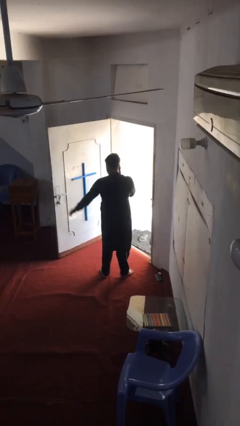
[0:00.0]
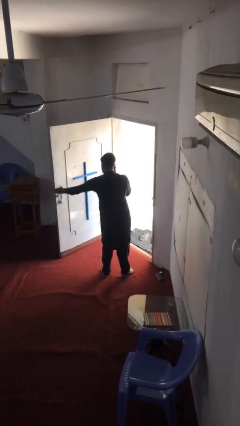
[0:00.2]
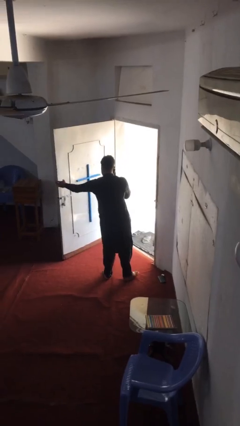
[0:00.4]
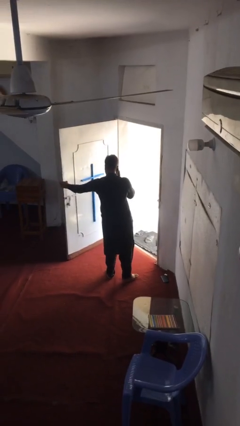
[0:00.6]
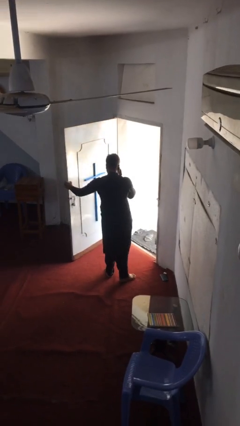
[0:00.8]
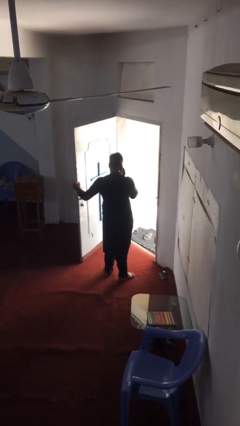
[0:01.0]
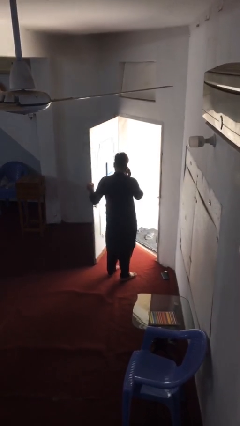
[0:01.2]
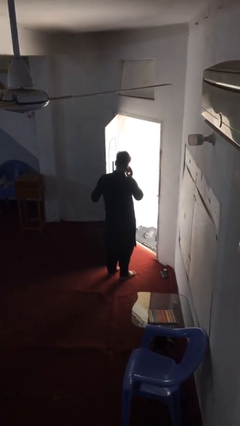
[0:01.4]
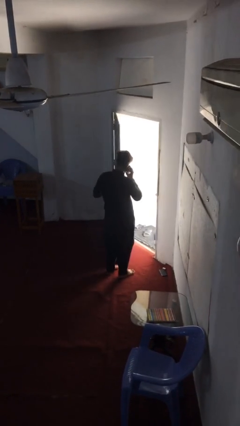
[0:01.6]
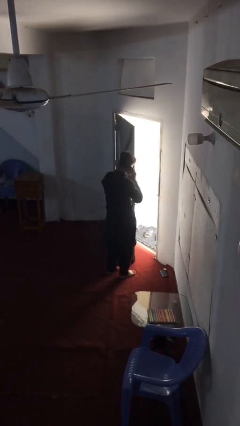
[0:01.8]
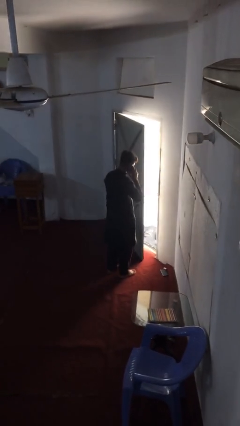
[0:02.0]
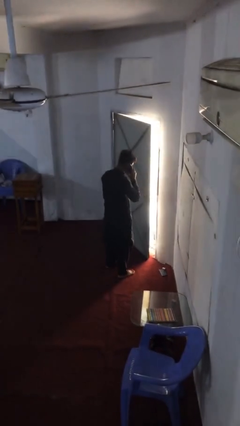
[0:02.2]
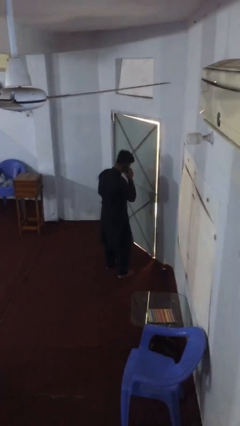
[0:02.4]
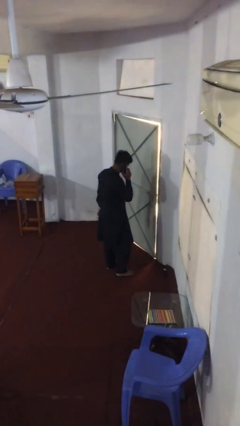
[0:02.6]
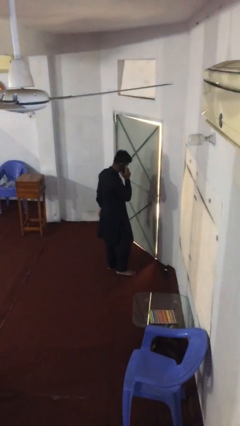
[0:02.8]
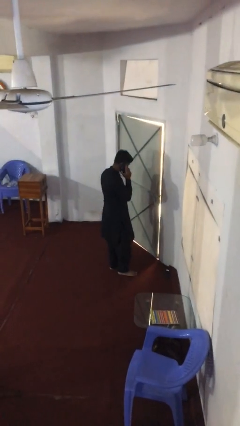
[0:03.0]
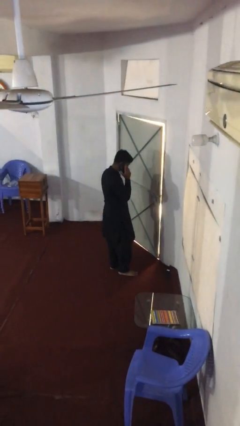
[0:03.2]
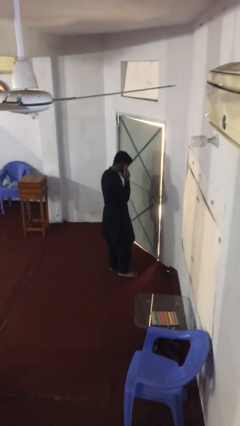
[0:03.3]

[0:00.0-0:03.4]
person closes facility door

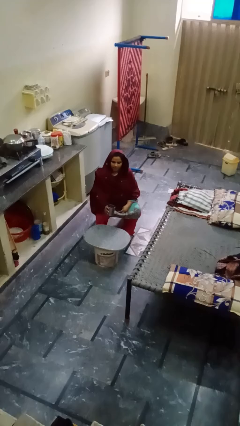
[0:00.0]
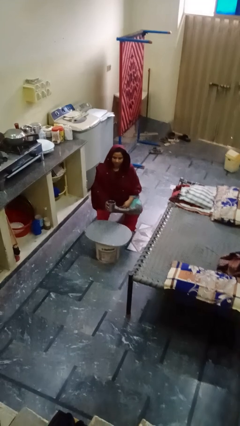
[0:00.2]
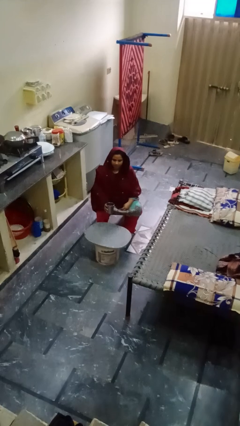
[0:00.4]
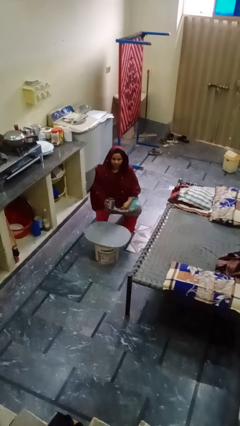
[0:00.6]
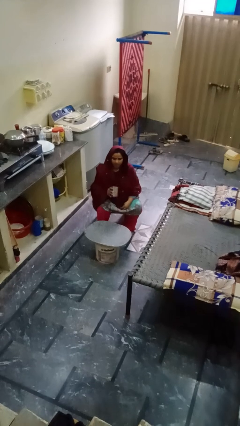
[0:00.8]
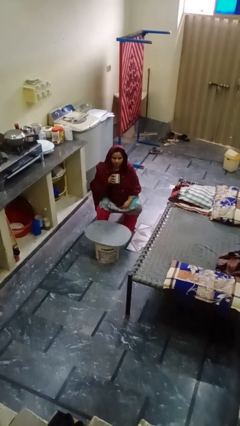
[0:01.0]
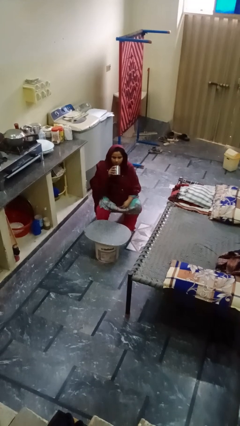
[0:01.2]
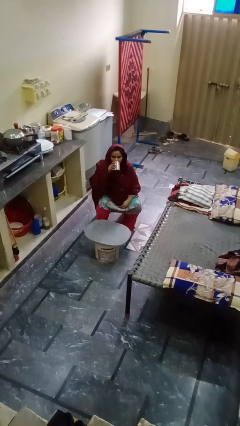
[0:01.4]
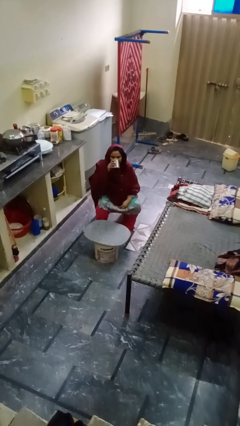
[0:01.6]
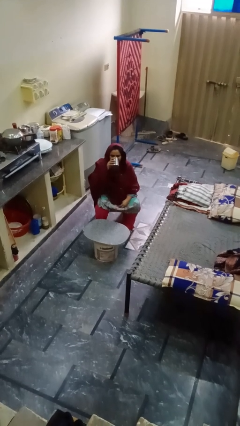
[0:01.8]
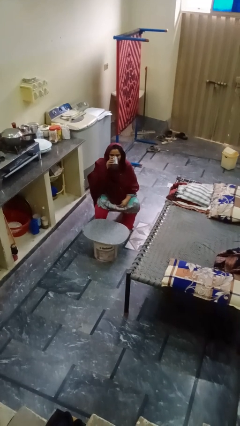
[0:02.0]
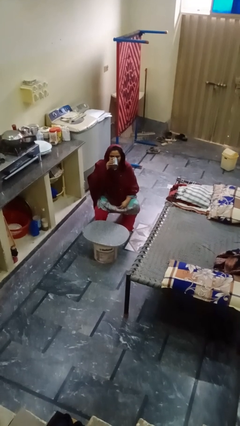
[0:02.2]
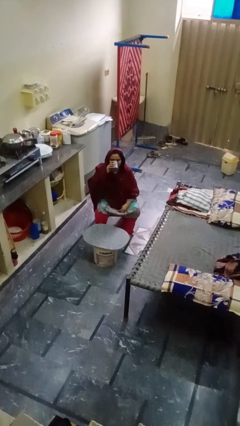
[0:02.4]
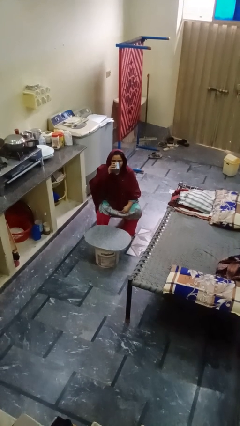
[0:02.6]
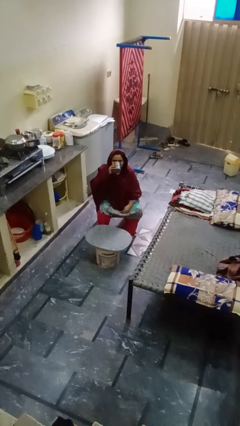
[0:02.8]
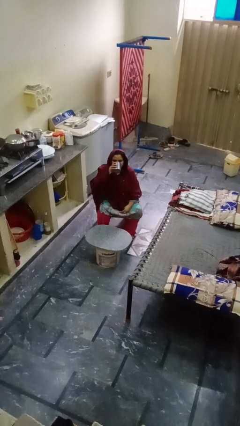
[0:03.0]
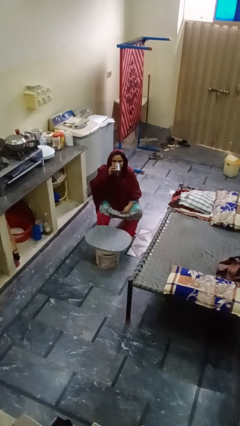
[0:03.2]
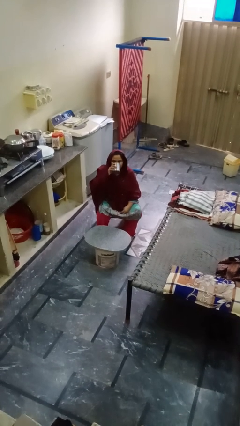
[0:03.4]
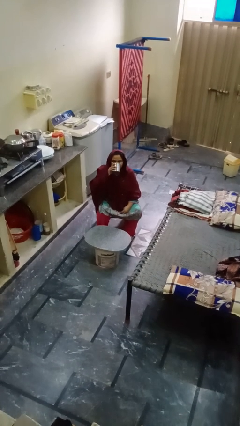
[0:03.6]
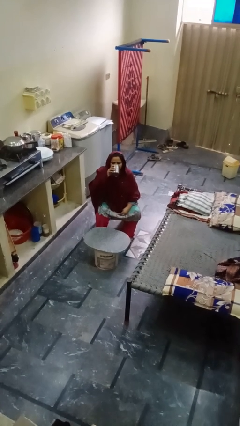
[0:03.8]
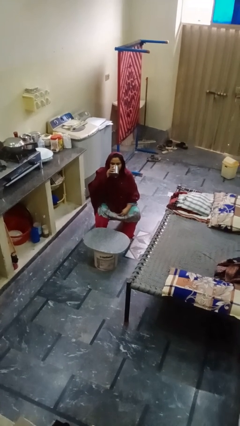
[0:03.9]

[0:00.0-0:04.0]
person drinks from shotglass

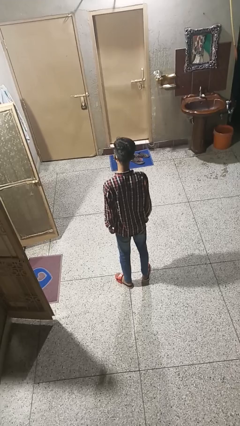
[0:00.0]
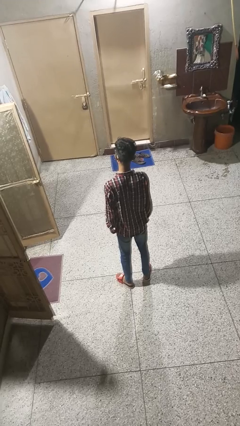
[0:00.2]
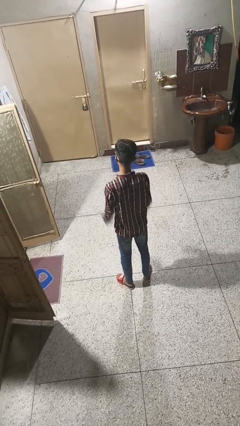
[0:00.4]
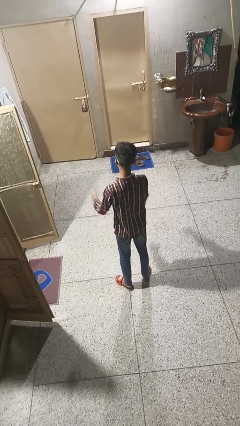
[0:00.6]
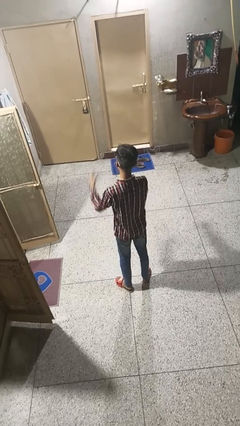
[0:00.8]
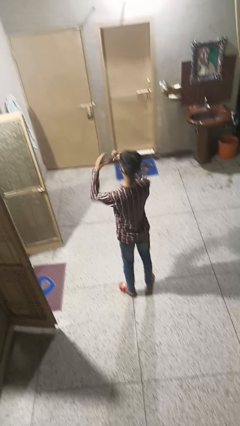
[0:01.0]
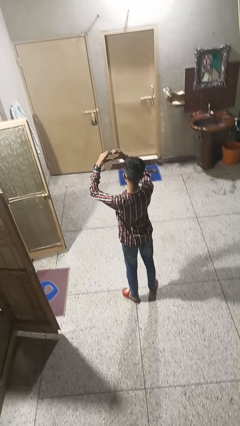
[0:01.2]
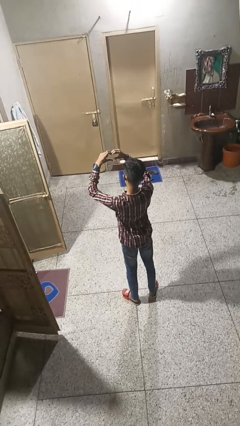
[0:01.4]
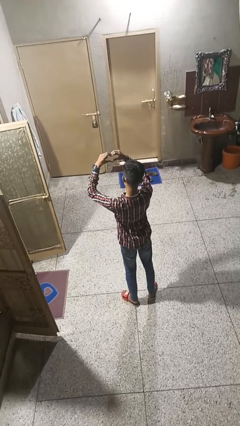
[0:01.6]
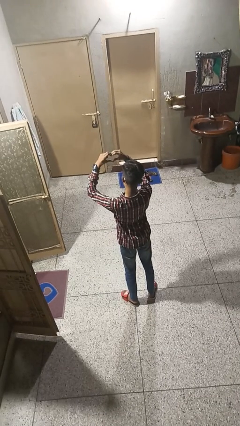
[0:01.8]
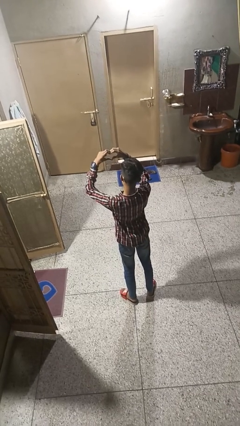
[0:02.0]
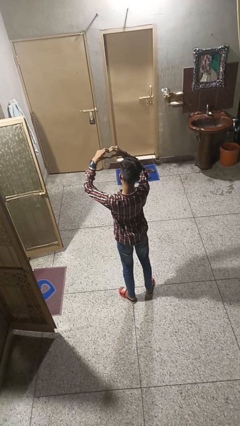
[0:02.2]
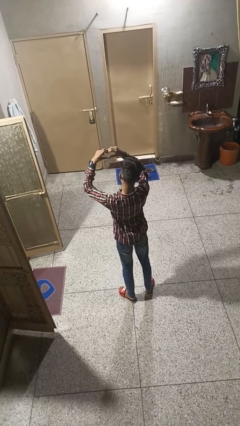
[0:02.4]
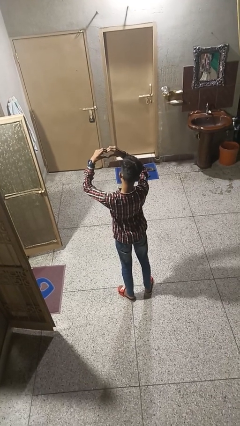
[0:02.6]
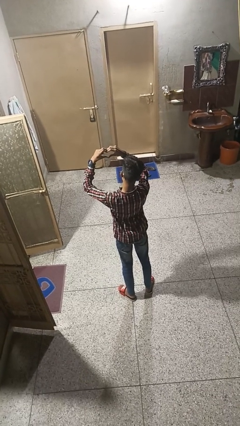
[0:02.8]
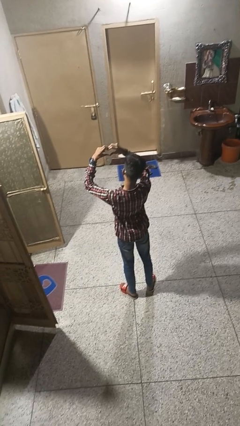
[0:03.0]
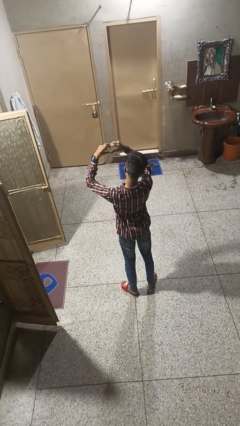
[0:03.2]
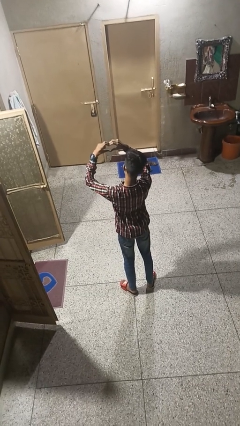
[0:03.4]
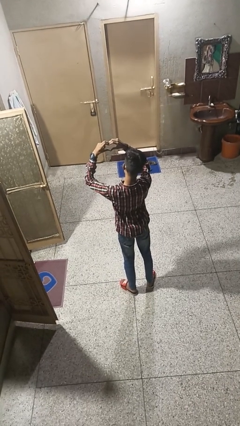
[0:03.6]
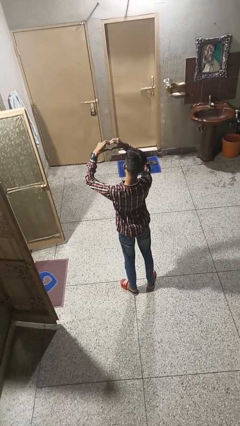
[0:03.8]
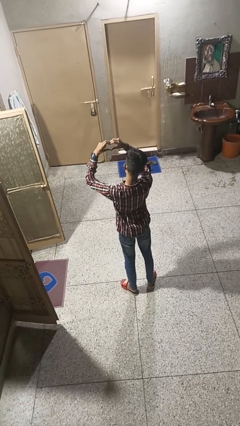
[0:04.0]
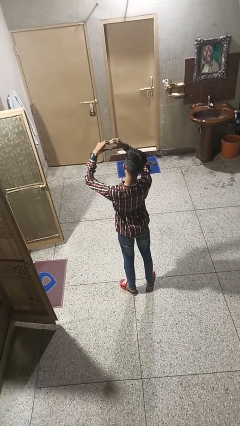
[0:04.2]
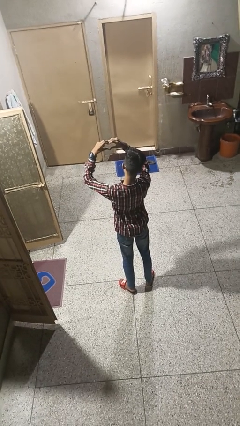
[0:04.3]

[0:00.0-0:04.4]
person gestures heart

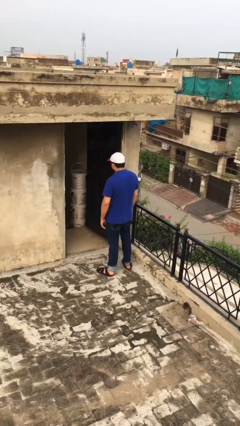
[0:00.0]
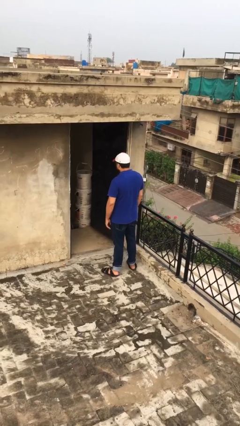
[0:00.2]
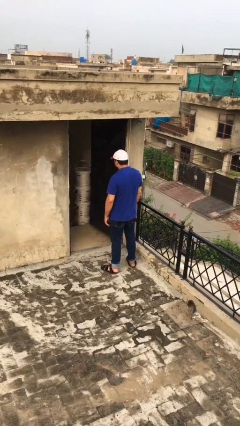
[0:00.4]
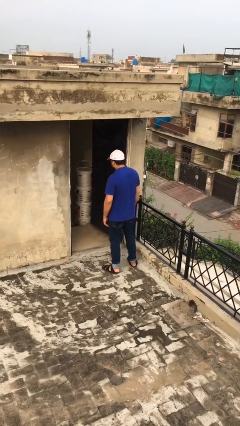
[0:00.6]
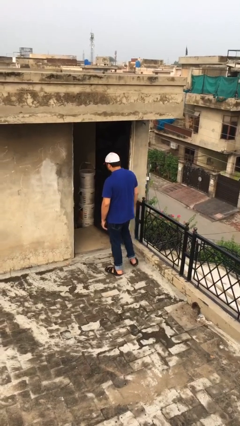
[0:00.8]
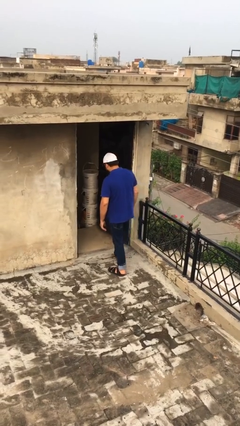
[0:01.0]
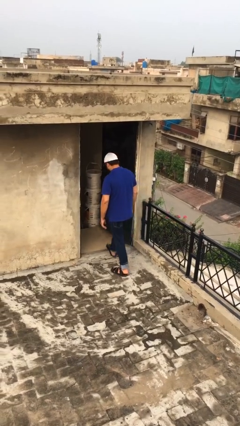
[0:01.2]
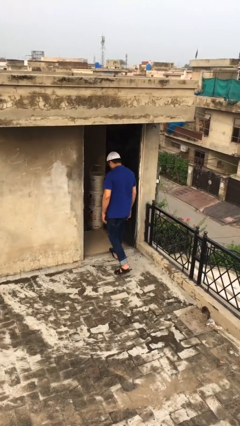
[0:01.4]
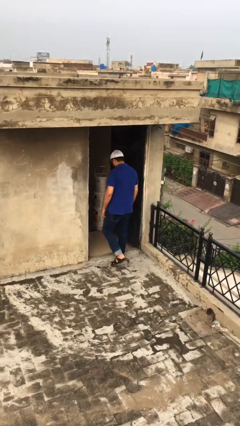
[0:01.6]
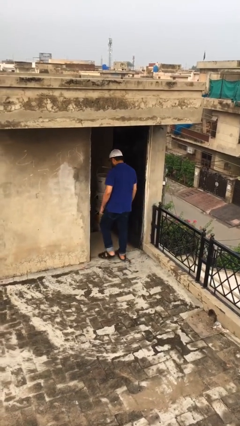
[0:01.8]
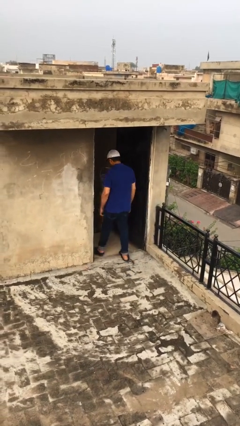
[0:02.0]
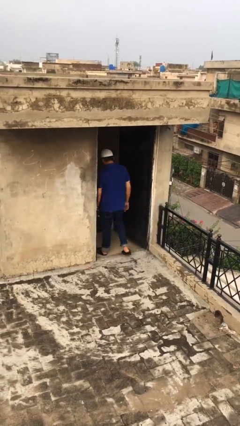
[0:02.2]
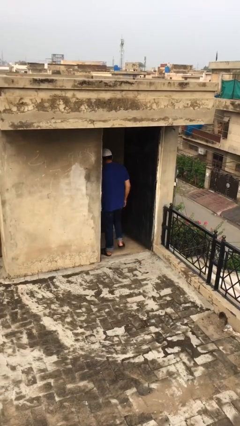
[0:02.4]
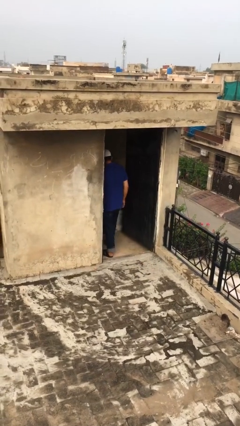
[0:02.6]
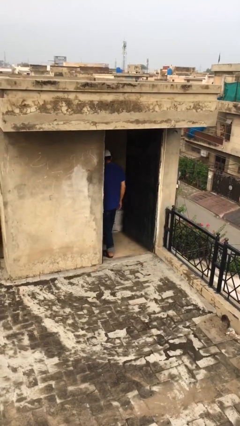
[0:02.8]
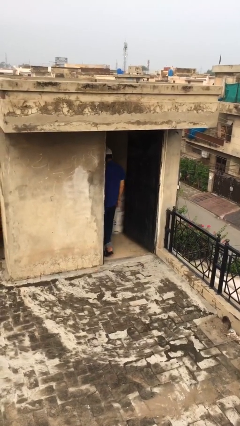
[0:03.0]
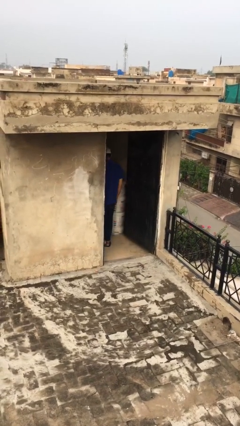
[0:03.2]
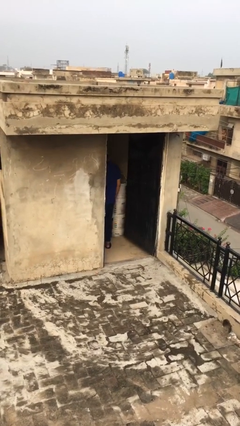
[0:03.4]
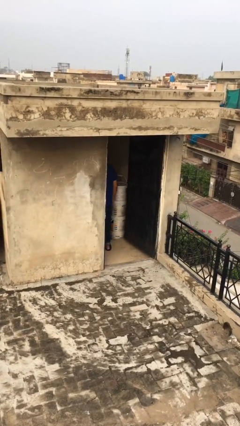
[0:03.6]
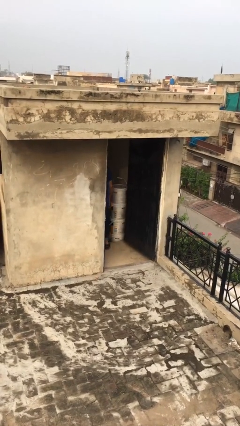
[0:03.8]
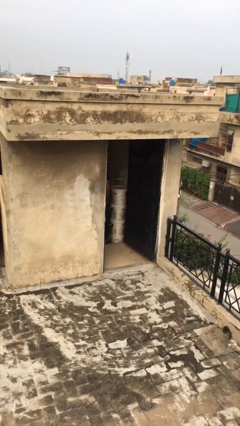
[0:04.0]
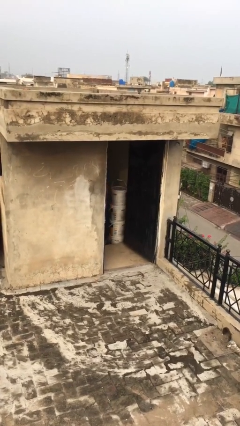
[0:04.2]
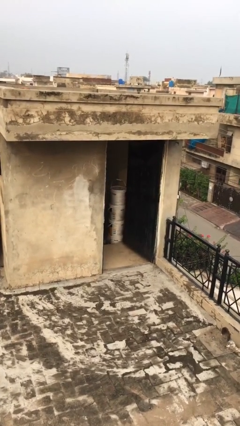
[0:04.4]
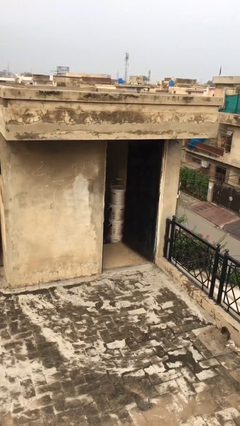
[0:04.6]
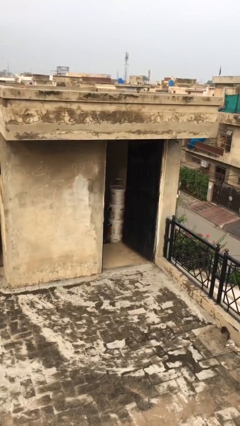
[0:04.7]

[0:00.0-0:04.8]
person exits scene through structure

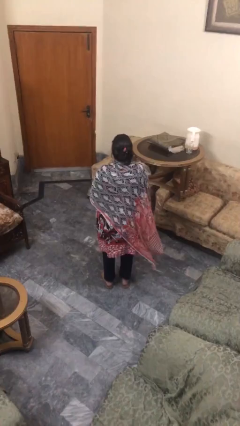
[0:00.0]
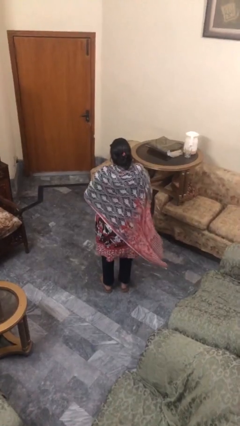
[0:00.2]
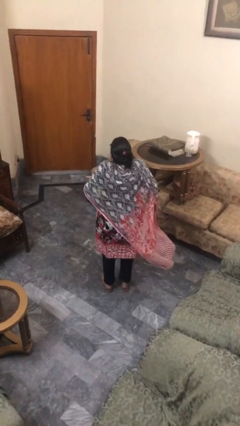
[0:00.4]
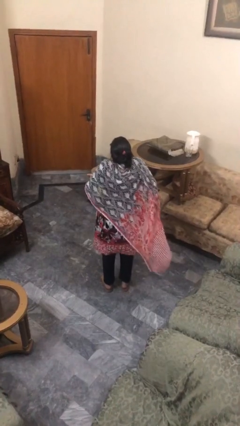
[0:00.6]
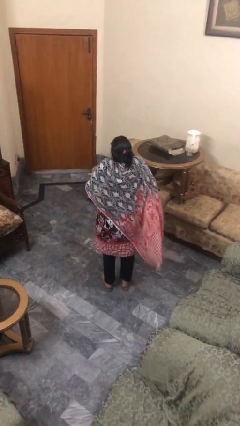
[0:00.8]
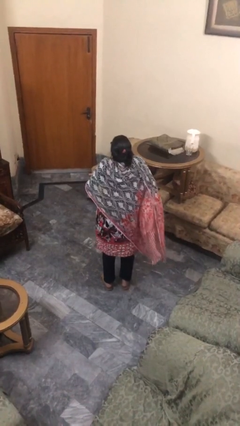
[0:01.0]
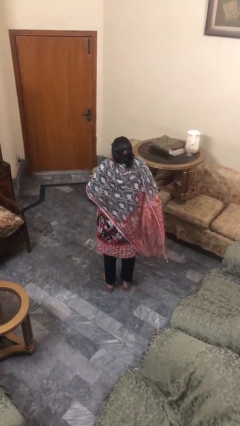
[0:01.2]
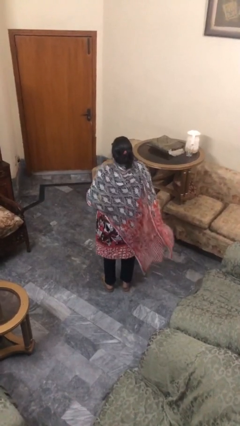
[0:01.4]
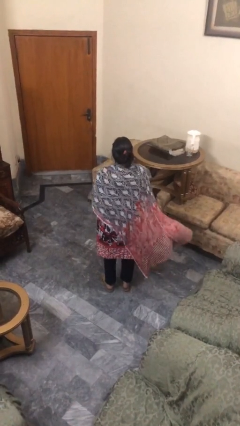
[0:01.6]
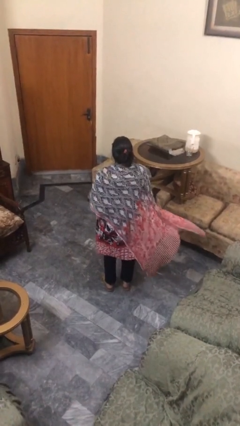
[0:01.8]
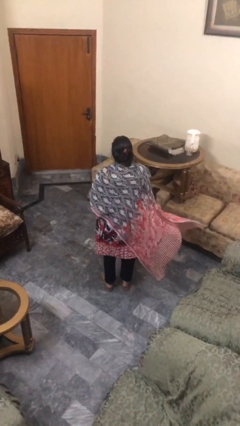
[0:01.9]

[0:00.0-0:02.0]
person shrugs
